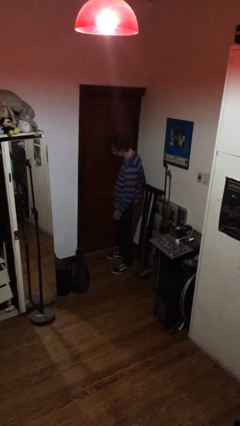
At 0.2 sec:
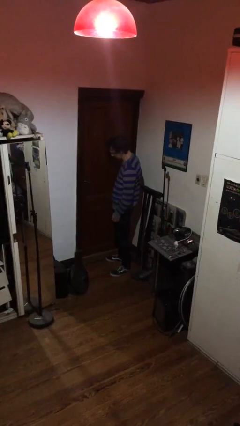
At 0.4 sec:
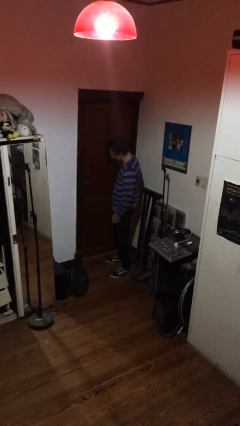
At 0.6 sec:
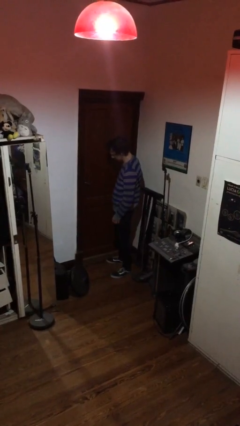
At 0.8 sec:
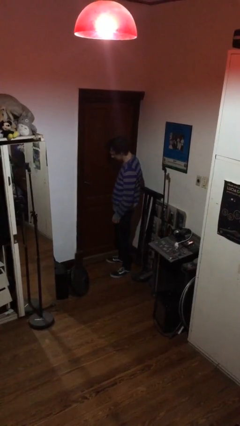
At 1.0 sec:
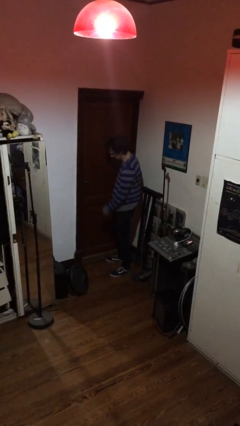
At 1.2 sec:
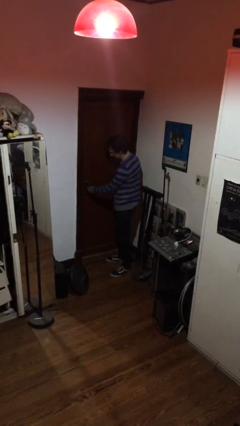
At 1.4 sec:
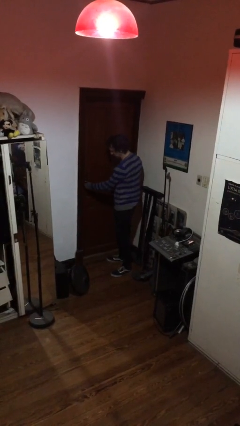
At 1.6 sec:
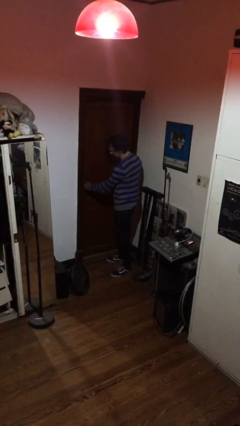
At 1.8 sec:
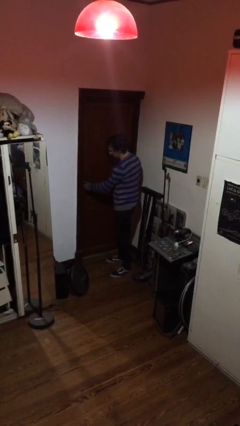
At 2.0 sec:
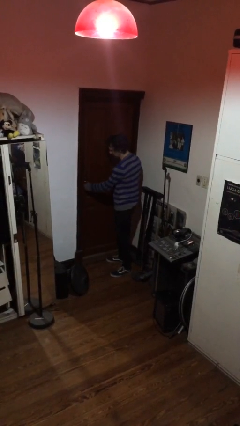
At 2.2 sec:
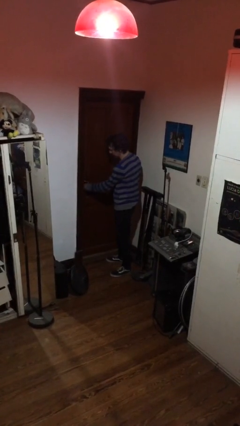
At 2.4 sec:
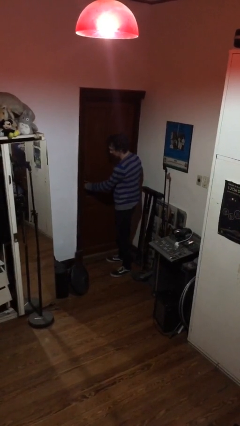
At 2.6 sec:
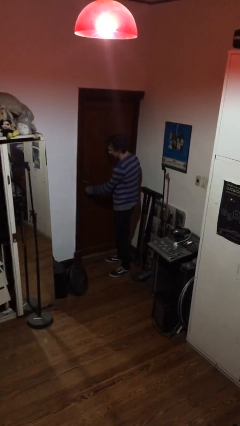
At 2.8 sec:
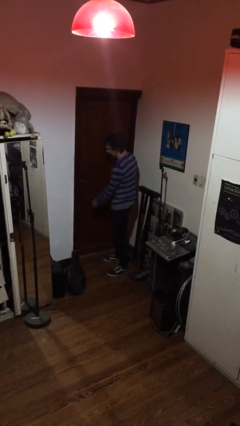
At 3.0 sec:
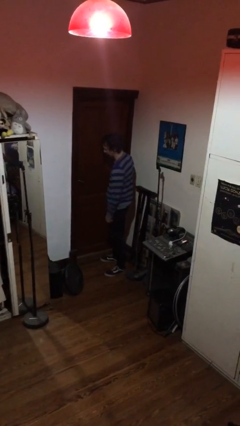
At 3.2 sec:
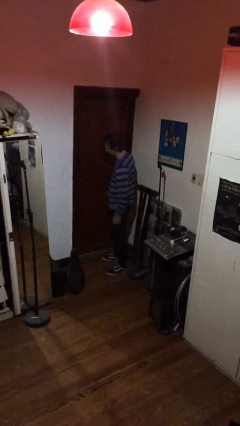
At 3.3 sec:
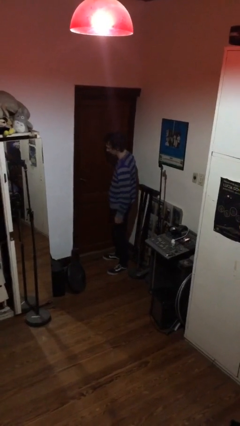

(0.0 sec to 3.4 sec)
person unlocks door with keys

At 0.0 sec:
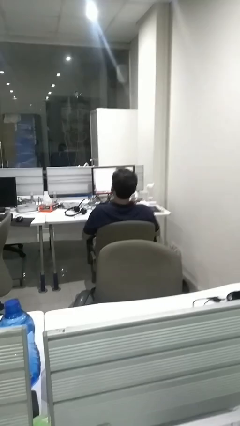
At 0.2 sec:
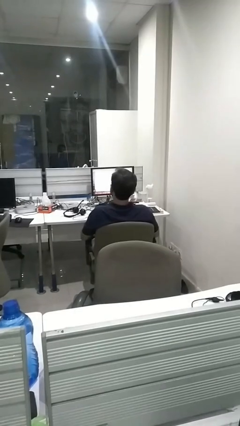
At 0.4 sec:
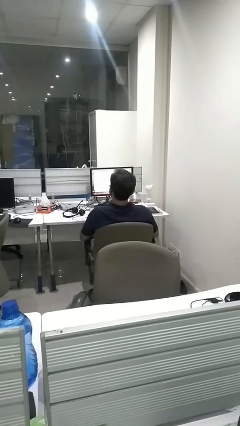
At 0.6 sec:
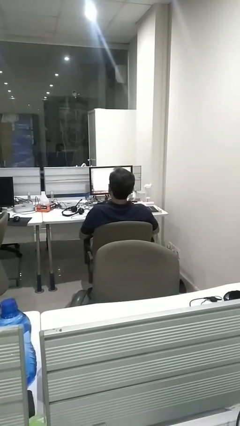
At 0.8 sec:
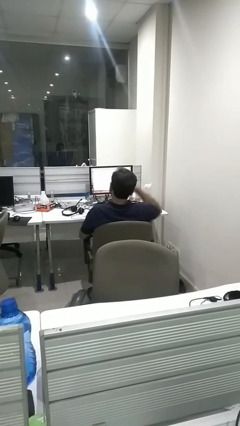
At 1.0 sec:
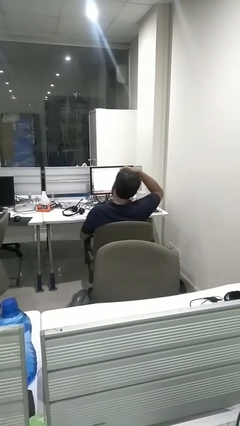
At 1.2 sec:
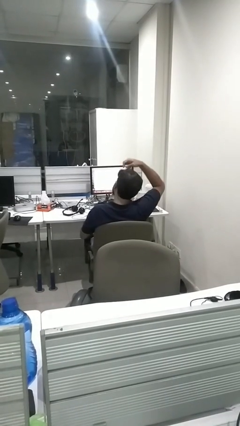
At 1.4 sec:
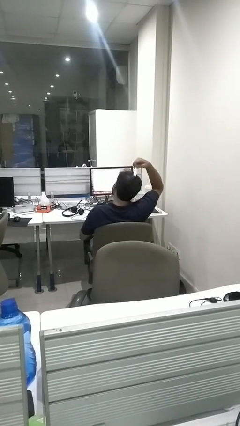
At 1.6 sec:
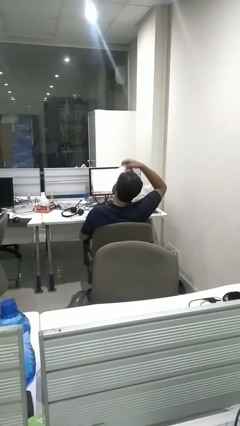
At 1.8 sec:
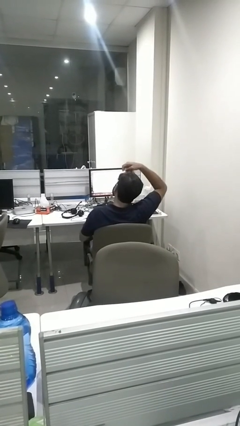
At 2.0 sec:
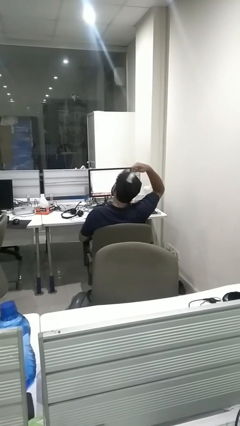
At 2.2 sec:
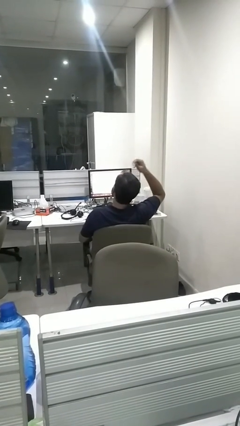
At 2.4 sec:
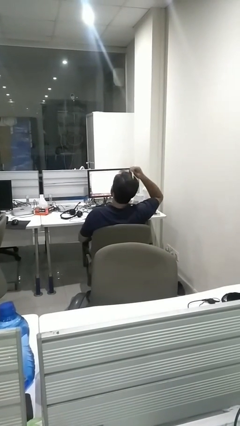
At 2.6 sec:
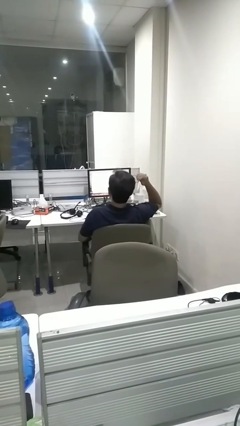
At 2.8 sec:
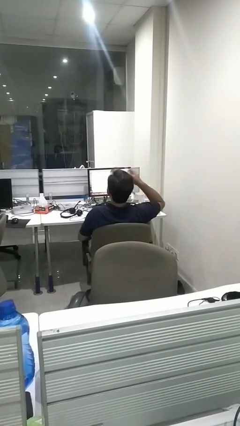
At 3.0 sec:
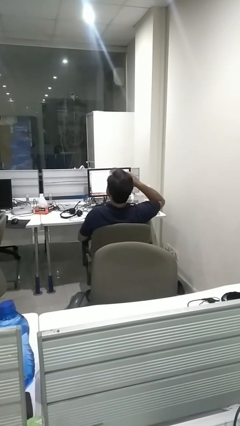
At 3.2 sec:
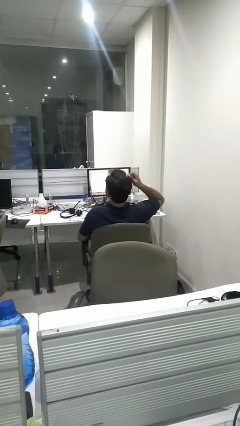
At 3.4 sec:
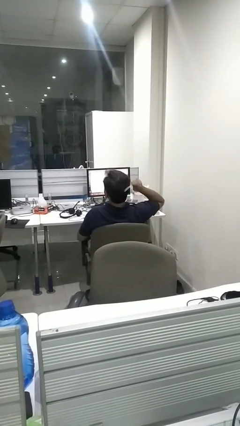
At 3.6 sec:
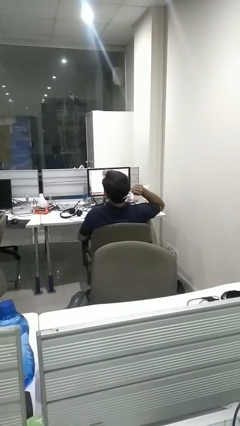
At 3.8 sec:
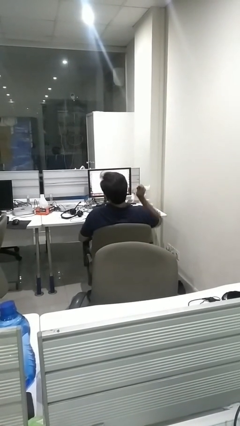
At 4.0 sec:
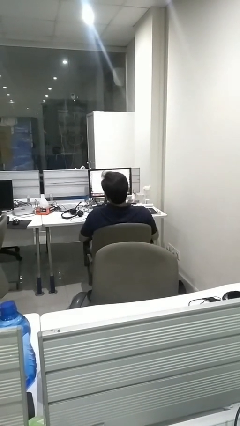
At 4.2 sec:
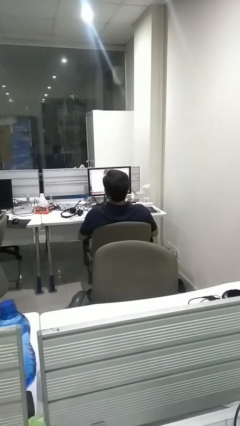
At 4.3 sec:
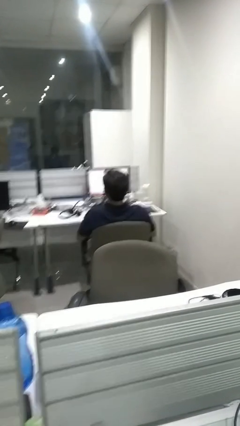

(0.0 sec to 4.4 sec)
person brushes hair

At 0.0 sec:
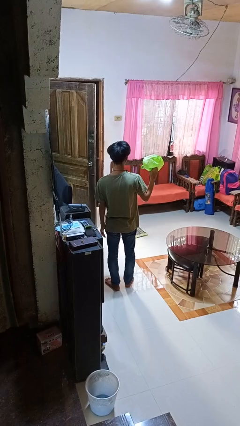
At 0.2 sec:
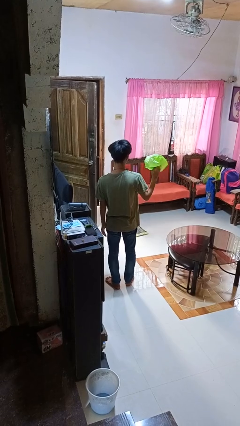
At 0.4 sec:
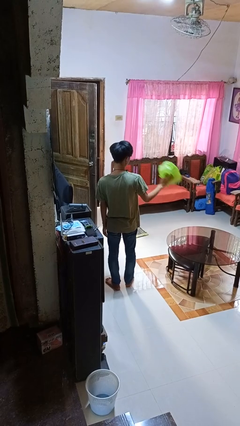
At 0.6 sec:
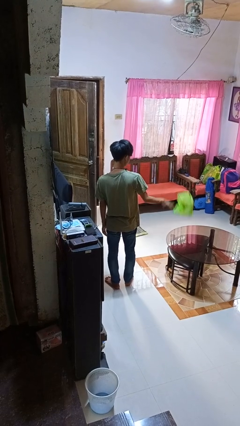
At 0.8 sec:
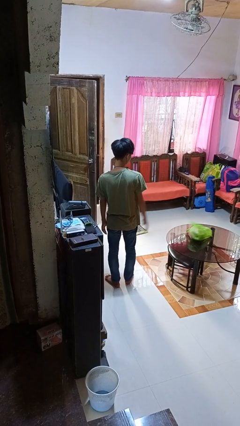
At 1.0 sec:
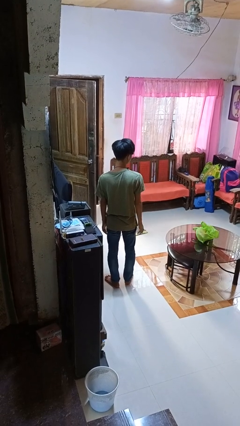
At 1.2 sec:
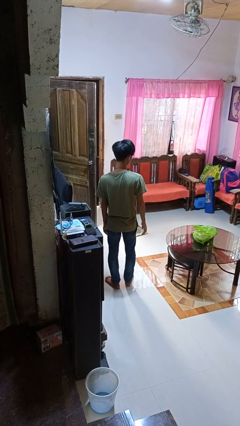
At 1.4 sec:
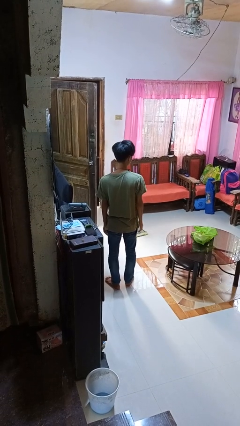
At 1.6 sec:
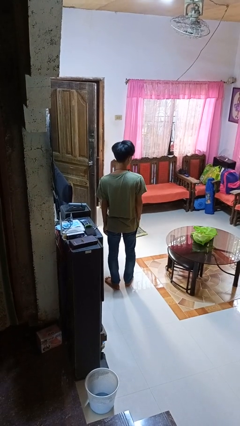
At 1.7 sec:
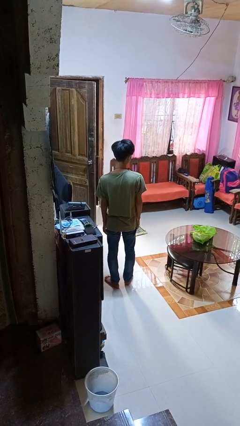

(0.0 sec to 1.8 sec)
person throws object on table

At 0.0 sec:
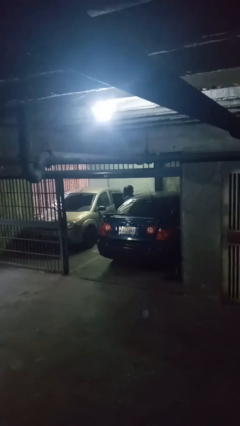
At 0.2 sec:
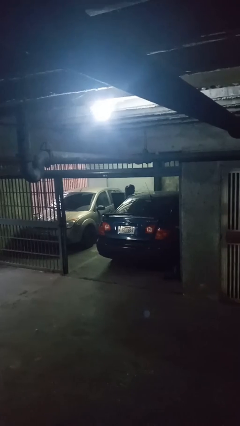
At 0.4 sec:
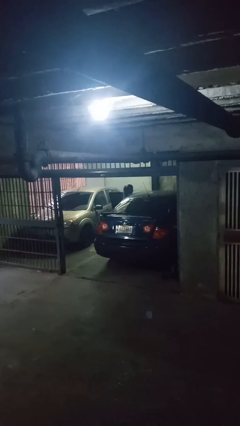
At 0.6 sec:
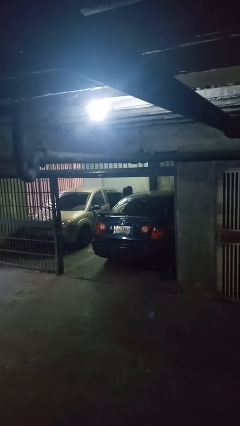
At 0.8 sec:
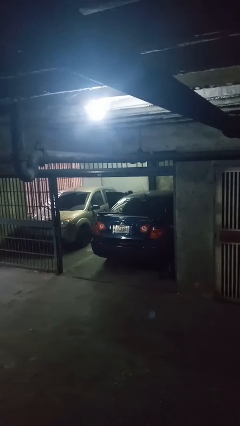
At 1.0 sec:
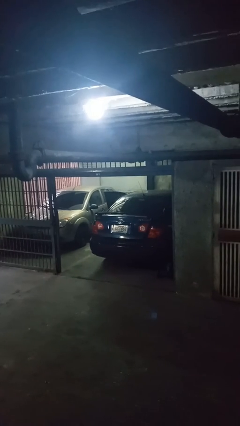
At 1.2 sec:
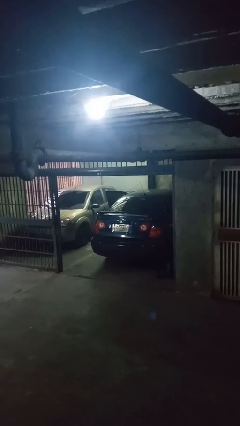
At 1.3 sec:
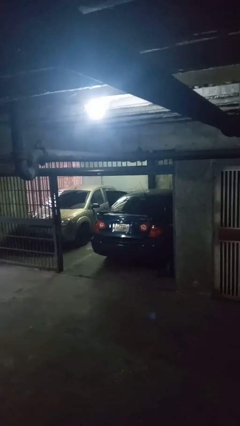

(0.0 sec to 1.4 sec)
person enters car

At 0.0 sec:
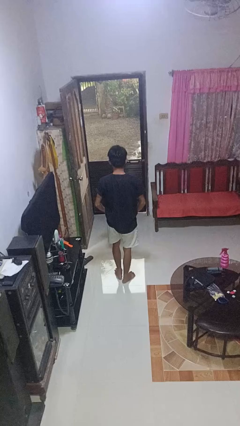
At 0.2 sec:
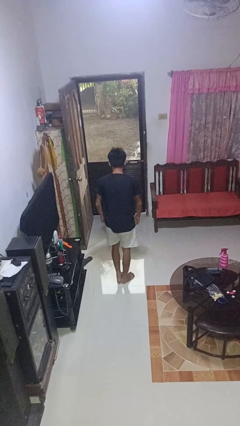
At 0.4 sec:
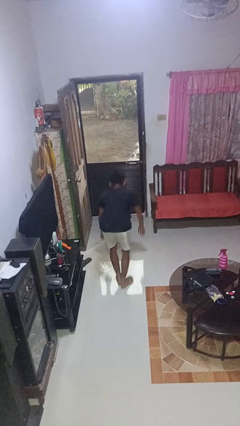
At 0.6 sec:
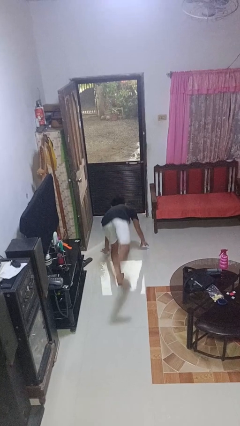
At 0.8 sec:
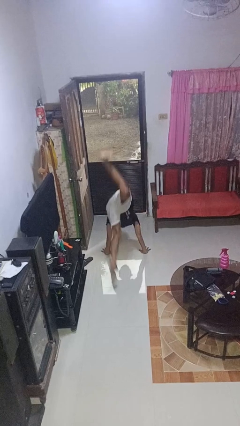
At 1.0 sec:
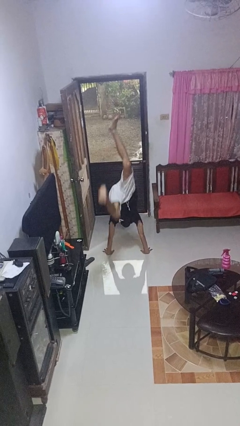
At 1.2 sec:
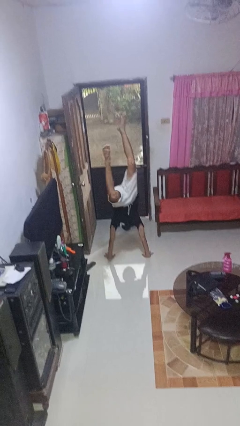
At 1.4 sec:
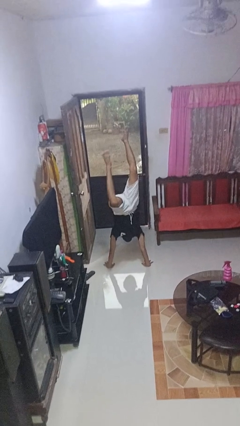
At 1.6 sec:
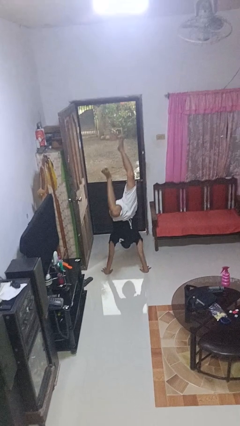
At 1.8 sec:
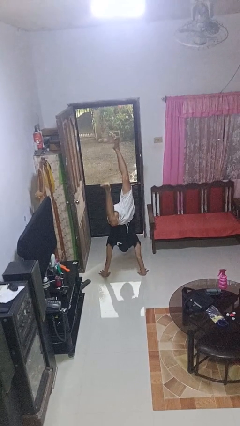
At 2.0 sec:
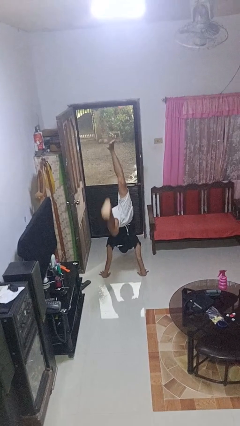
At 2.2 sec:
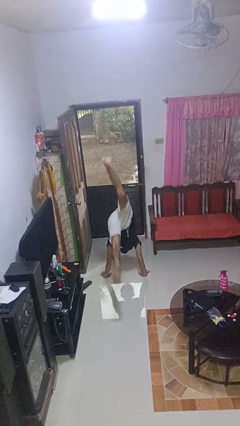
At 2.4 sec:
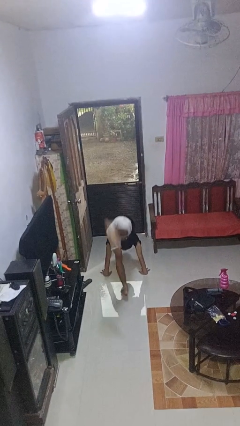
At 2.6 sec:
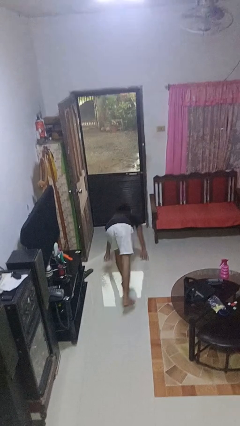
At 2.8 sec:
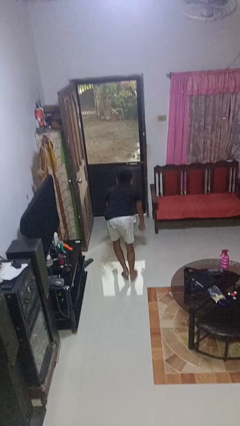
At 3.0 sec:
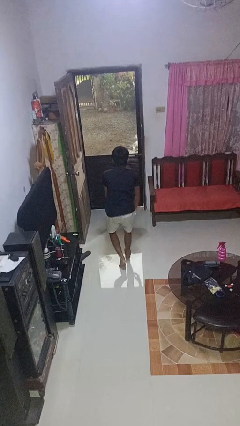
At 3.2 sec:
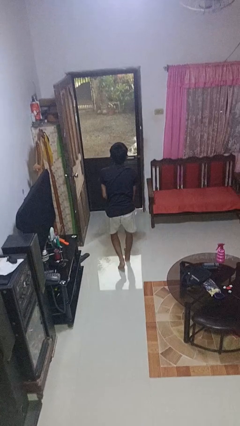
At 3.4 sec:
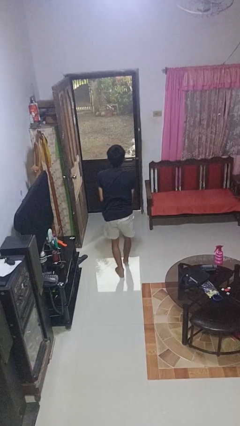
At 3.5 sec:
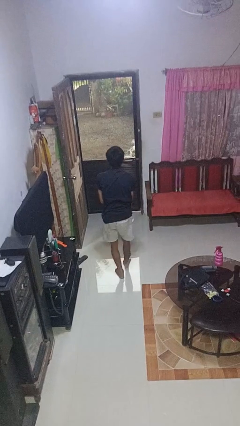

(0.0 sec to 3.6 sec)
person handstand

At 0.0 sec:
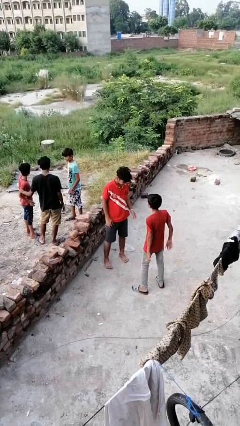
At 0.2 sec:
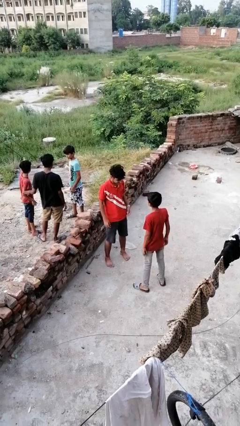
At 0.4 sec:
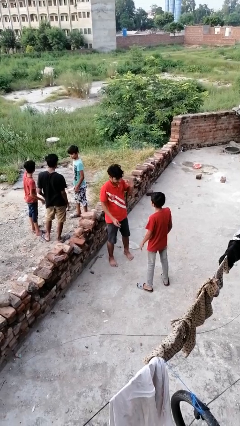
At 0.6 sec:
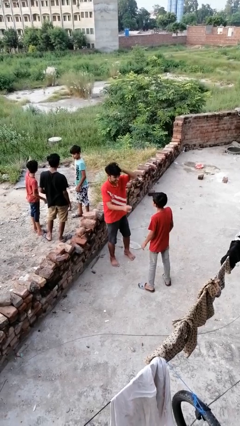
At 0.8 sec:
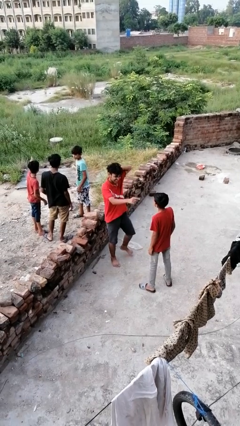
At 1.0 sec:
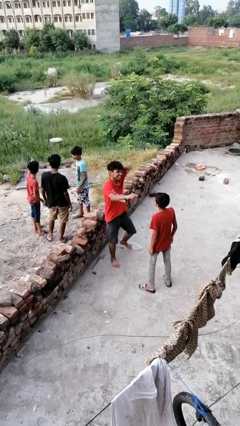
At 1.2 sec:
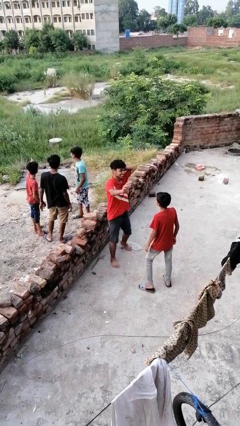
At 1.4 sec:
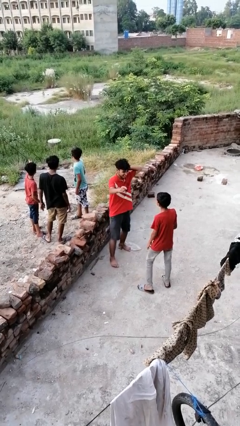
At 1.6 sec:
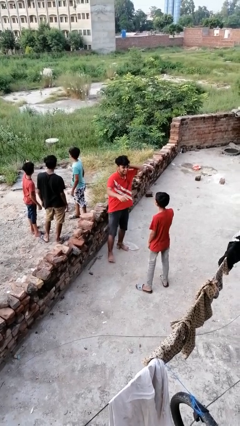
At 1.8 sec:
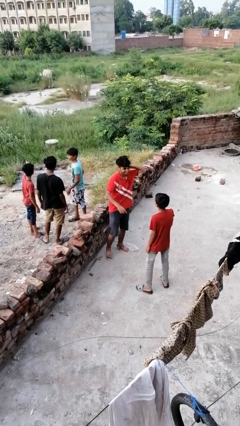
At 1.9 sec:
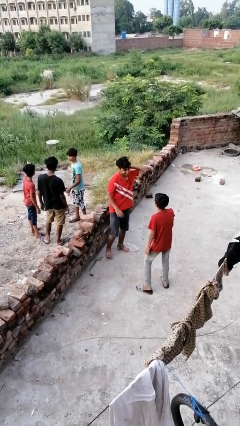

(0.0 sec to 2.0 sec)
person laughs with person

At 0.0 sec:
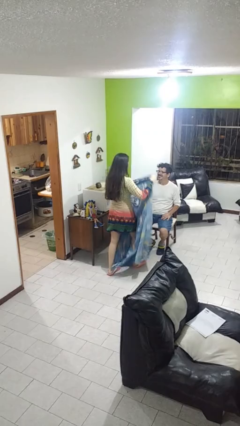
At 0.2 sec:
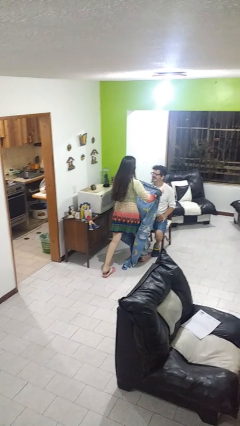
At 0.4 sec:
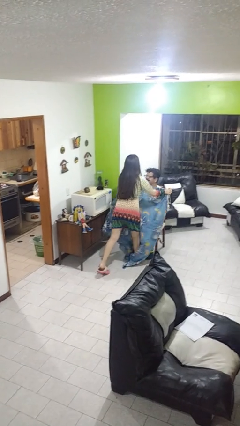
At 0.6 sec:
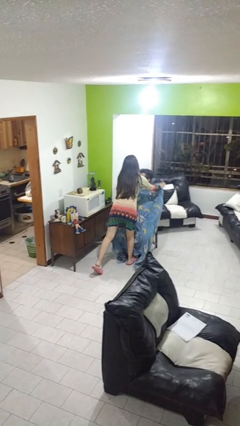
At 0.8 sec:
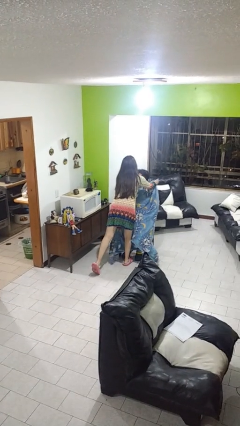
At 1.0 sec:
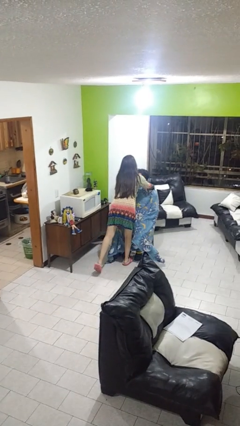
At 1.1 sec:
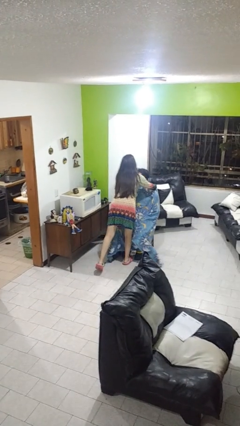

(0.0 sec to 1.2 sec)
person covers friend with blanket
